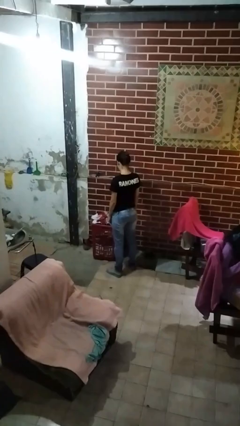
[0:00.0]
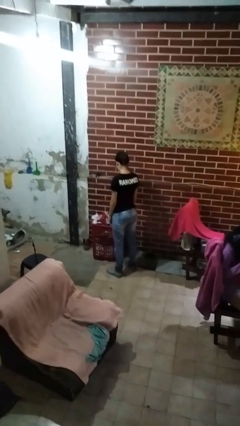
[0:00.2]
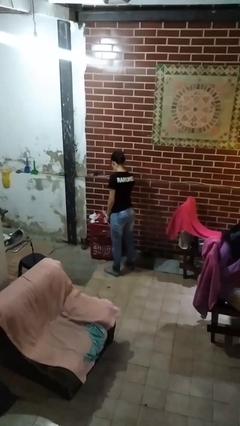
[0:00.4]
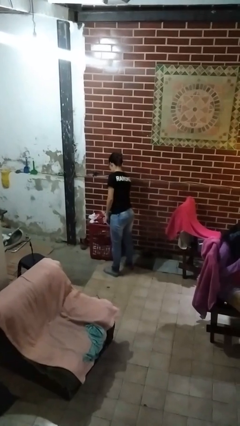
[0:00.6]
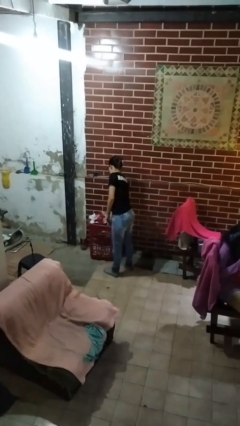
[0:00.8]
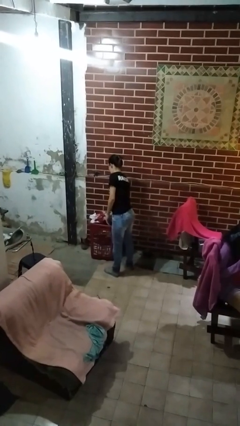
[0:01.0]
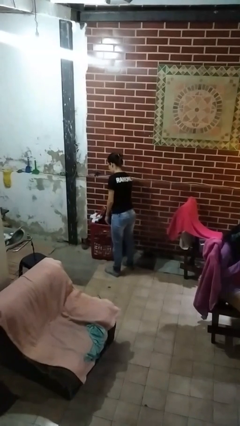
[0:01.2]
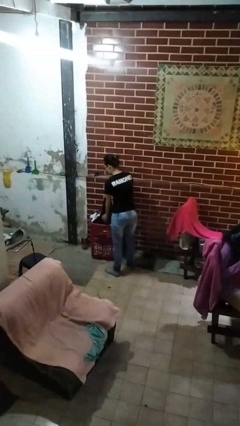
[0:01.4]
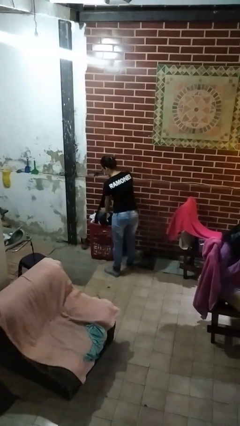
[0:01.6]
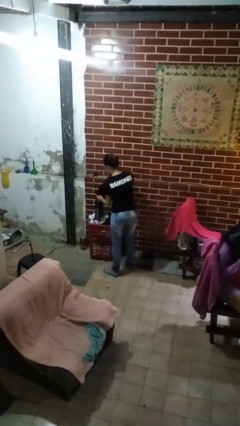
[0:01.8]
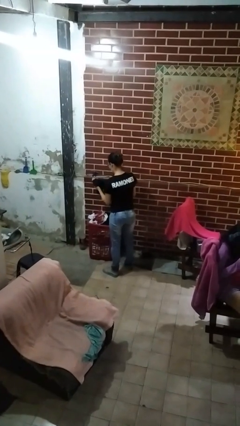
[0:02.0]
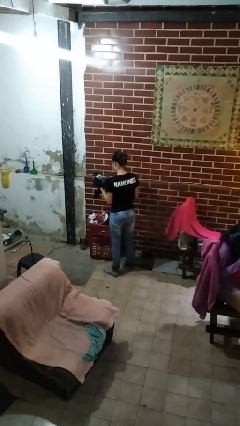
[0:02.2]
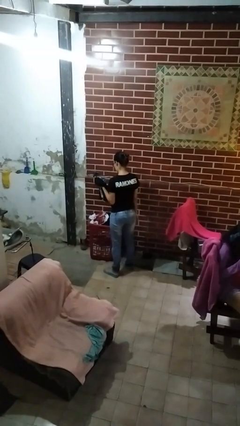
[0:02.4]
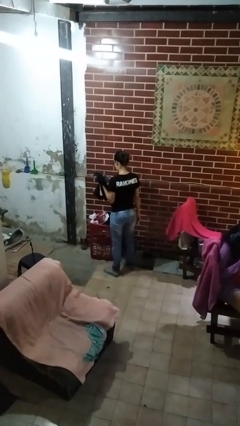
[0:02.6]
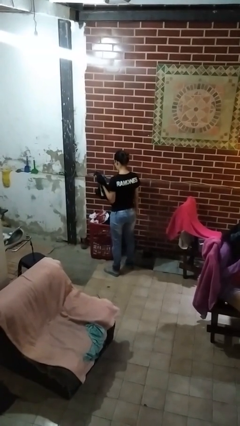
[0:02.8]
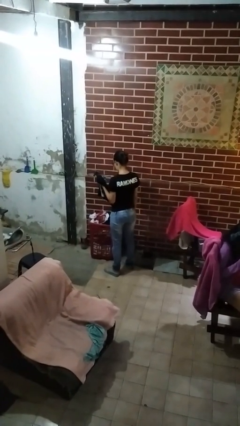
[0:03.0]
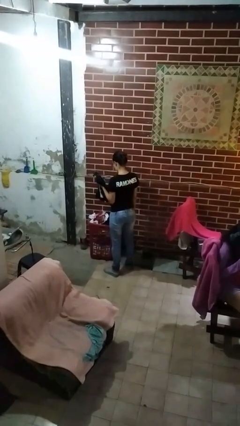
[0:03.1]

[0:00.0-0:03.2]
person takes object from basket

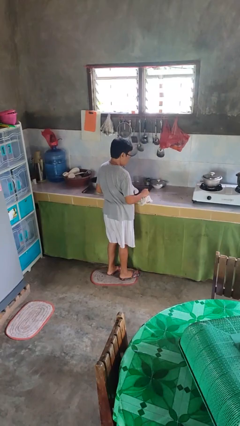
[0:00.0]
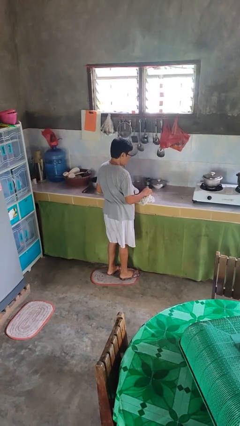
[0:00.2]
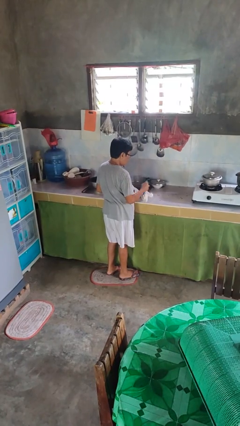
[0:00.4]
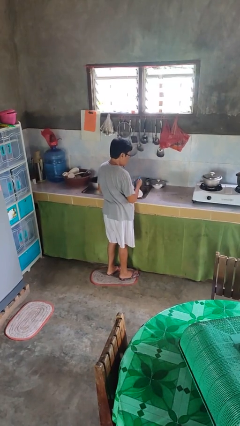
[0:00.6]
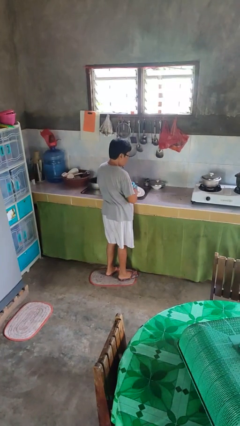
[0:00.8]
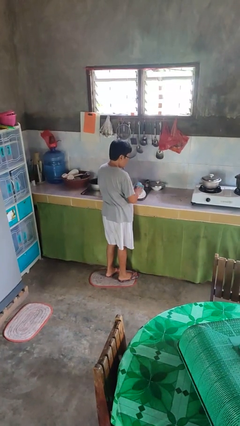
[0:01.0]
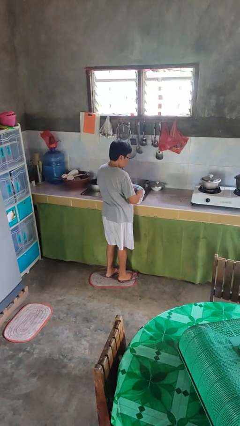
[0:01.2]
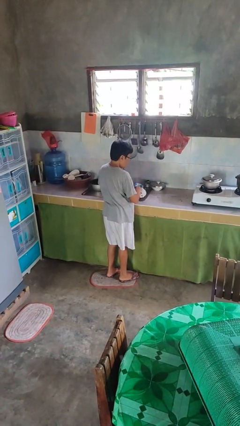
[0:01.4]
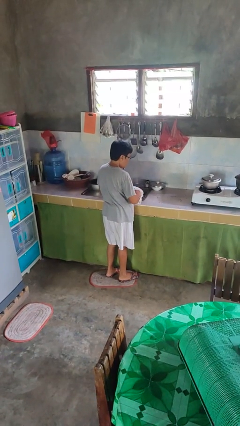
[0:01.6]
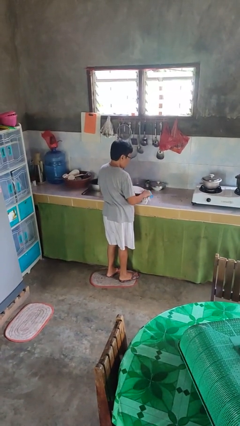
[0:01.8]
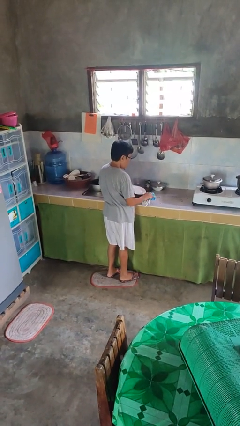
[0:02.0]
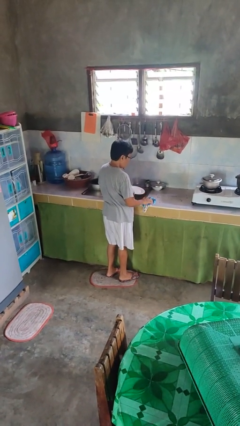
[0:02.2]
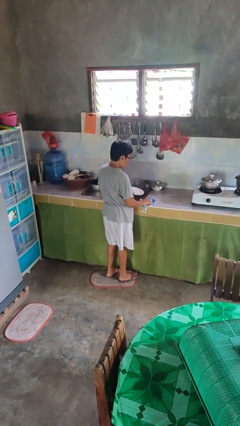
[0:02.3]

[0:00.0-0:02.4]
person dries dish

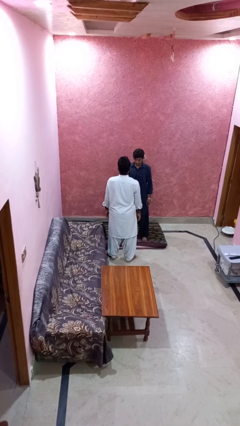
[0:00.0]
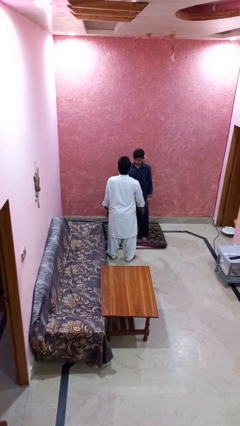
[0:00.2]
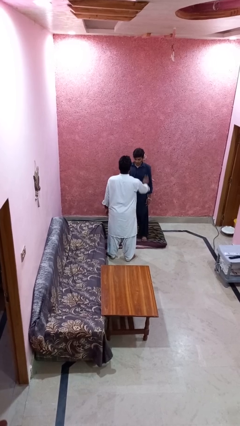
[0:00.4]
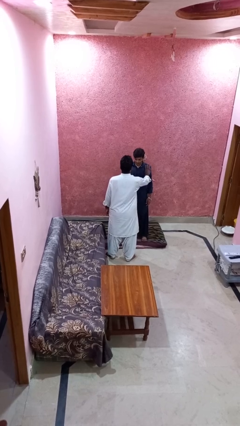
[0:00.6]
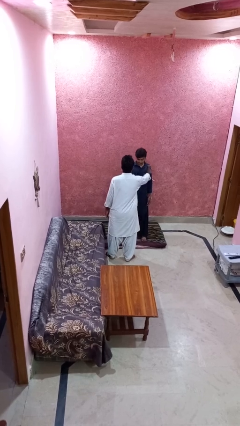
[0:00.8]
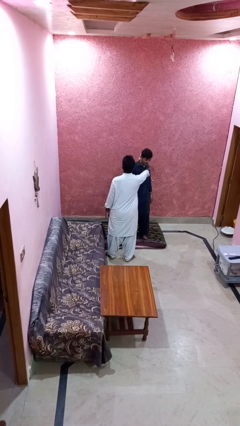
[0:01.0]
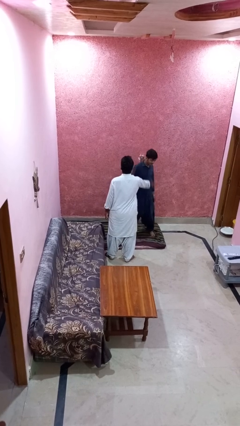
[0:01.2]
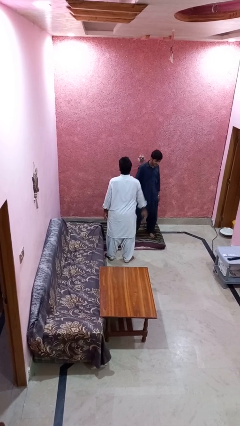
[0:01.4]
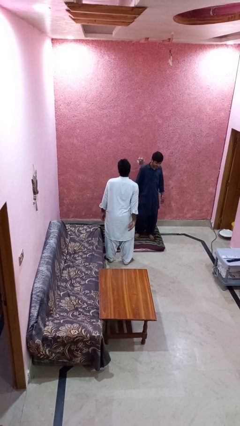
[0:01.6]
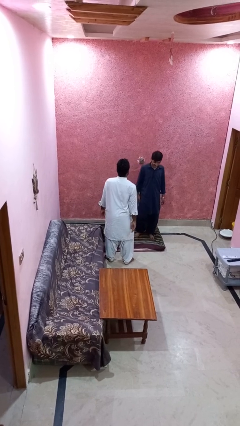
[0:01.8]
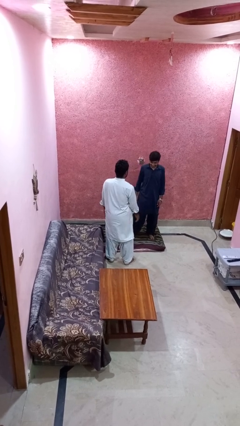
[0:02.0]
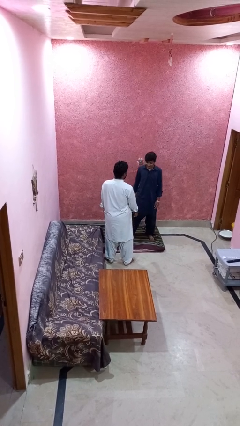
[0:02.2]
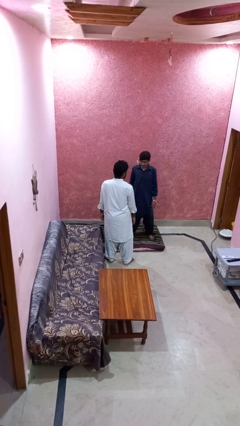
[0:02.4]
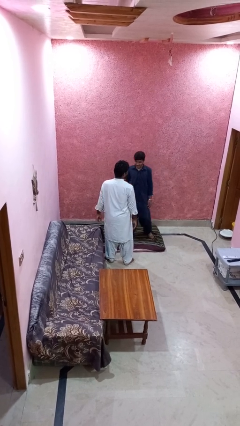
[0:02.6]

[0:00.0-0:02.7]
person shoves person

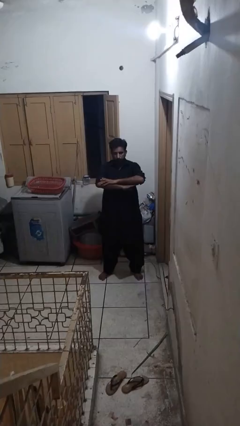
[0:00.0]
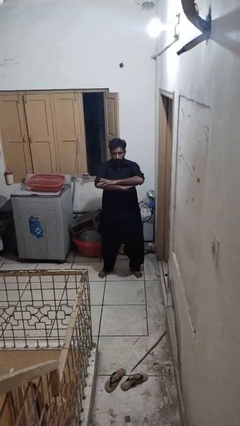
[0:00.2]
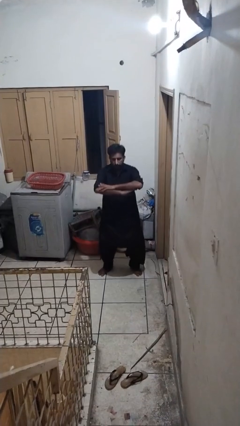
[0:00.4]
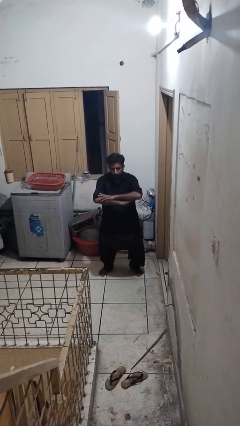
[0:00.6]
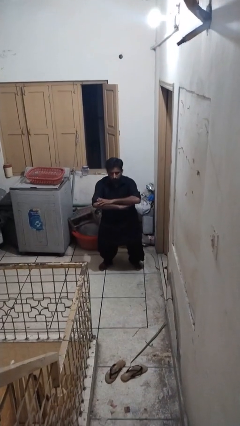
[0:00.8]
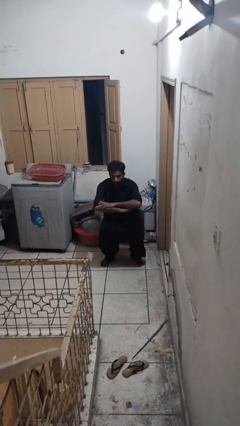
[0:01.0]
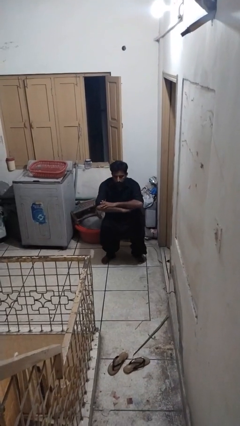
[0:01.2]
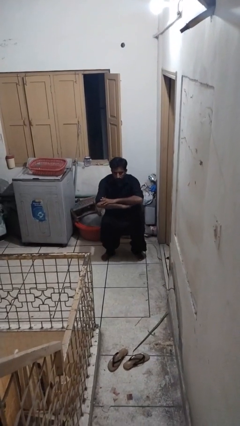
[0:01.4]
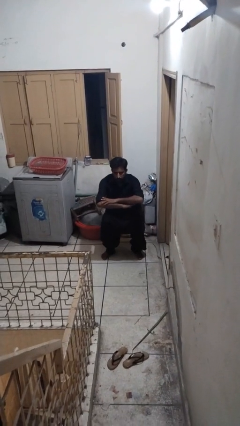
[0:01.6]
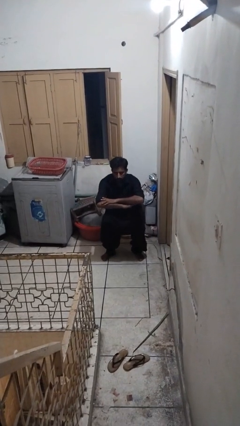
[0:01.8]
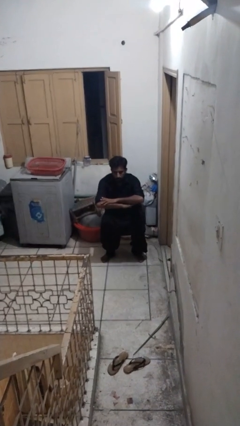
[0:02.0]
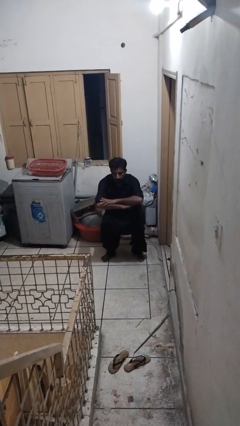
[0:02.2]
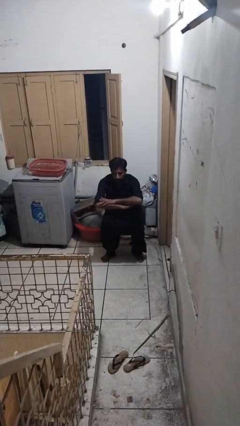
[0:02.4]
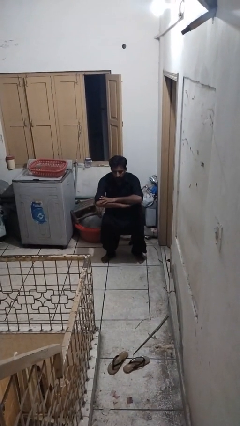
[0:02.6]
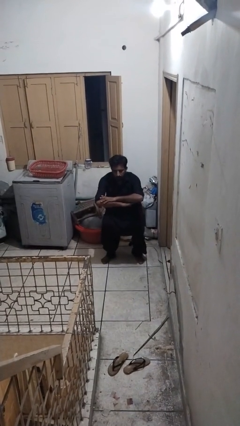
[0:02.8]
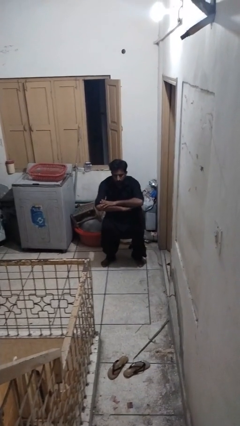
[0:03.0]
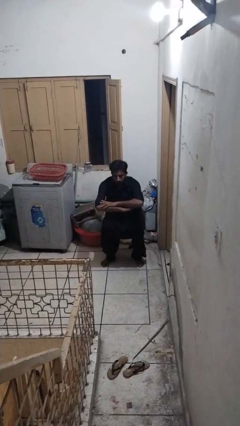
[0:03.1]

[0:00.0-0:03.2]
person squats

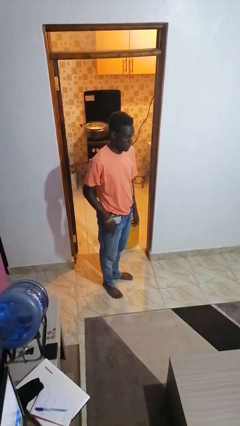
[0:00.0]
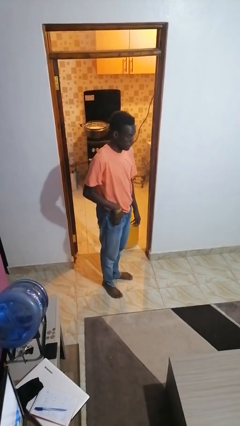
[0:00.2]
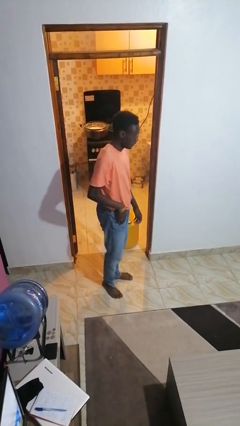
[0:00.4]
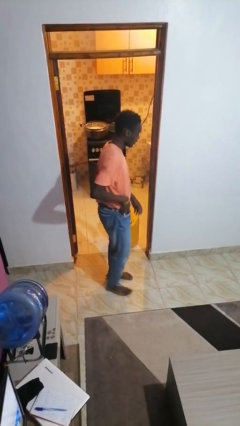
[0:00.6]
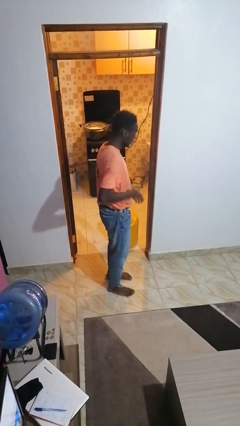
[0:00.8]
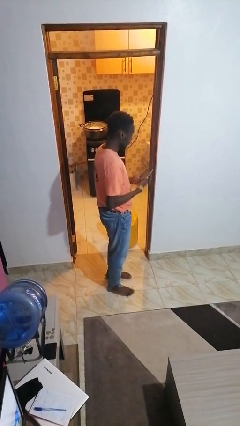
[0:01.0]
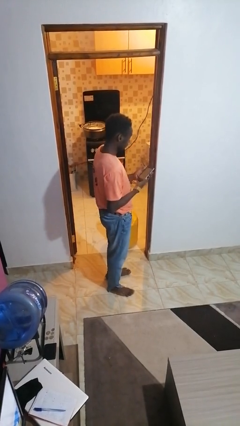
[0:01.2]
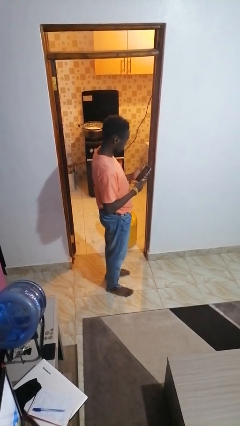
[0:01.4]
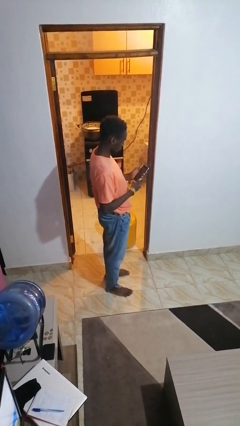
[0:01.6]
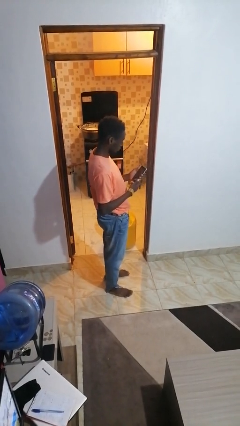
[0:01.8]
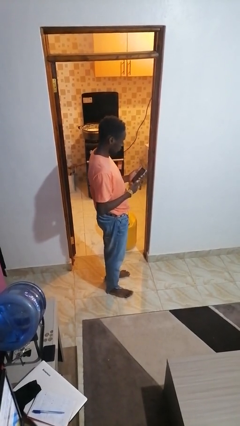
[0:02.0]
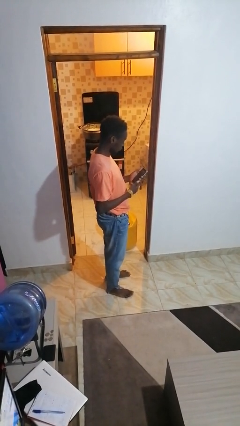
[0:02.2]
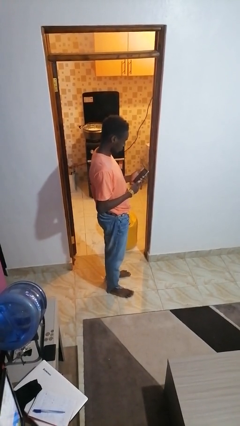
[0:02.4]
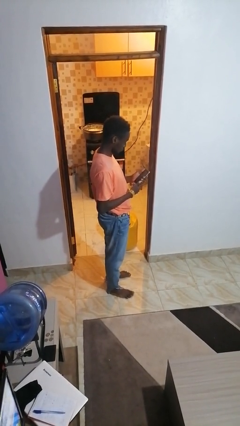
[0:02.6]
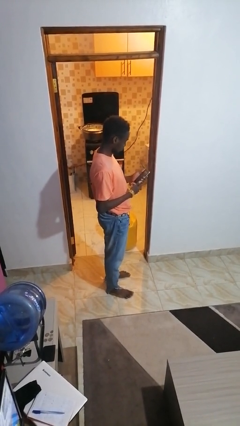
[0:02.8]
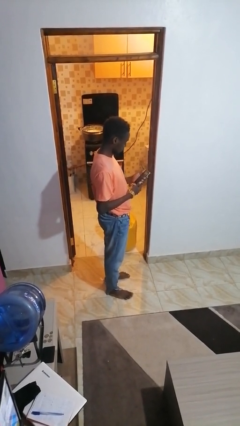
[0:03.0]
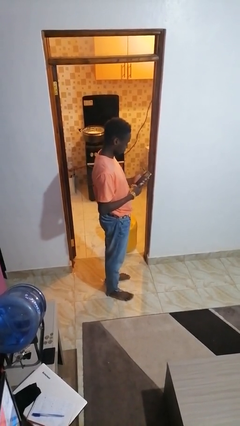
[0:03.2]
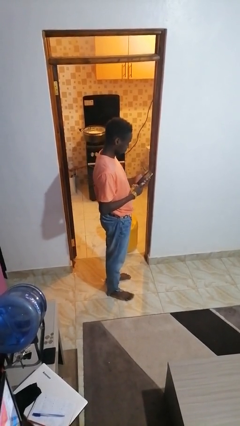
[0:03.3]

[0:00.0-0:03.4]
person takes phone from pocket

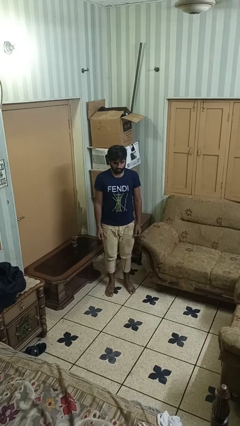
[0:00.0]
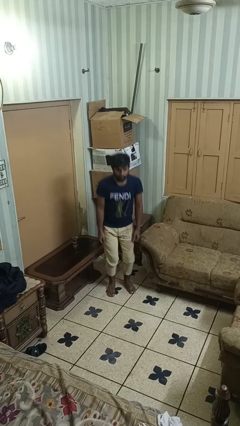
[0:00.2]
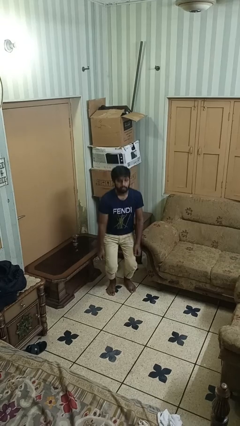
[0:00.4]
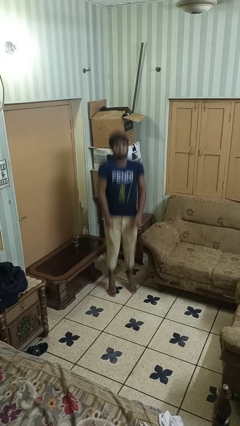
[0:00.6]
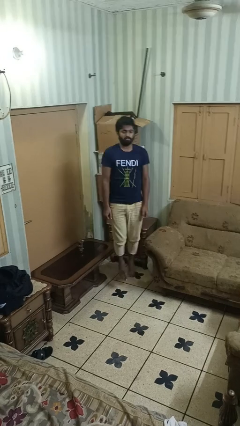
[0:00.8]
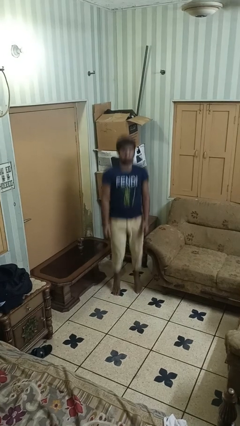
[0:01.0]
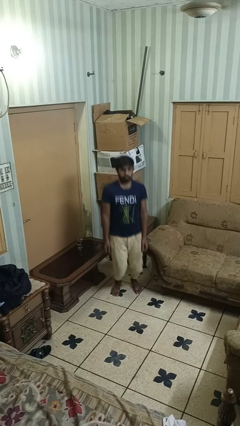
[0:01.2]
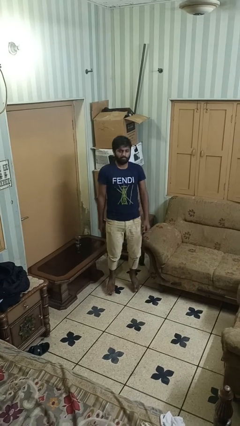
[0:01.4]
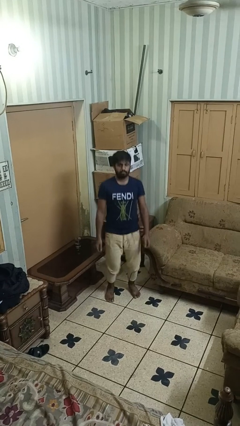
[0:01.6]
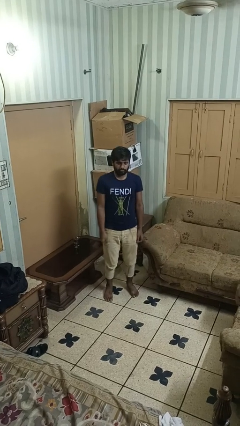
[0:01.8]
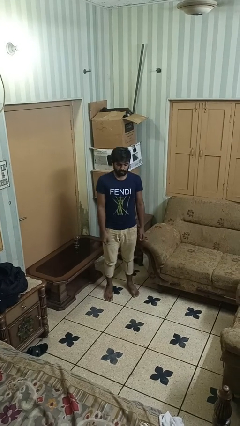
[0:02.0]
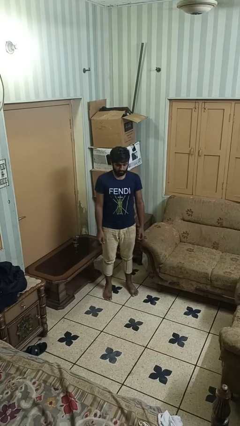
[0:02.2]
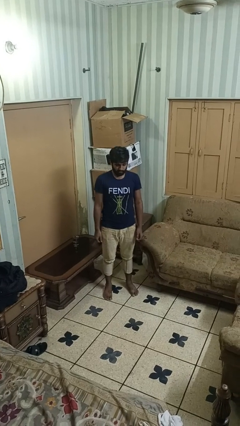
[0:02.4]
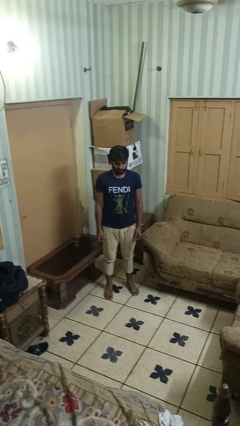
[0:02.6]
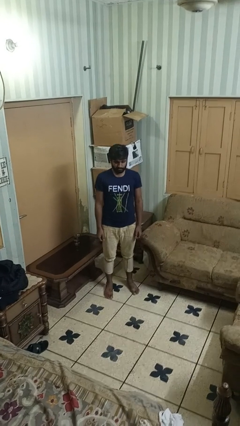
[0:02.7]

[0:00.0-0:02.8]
person jumps
